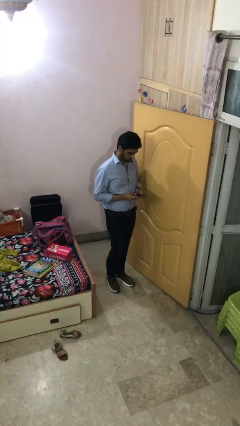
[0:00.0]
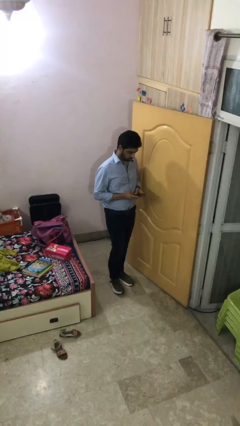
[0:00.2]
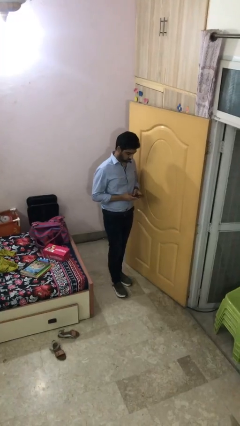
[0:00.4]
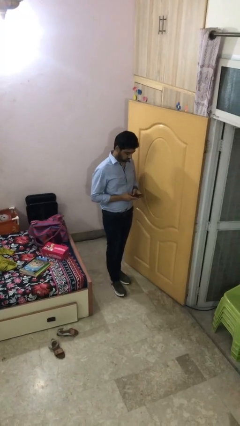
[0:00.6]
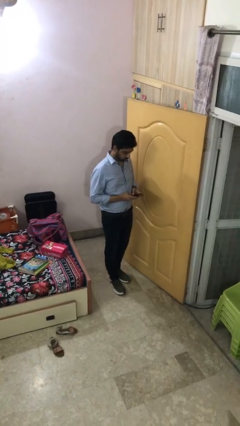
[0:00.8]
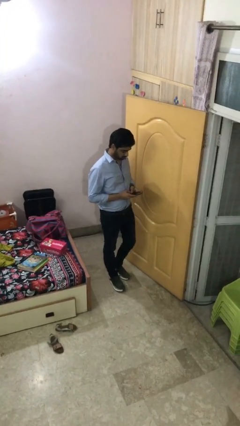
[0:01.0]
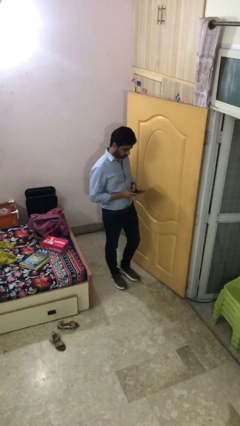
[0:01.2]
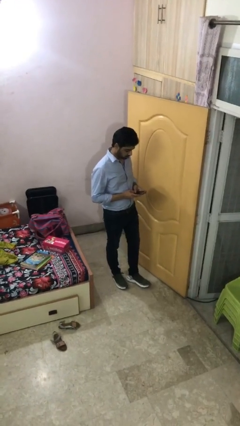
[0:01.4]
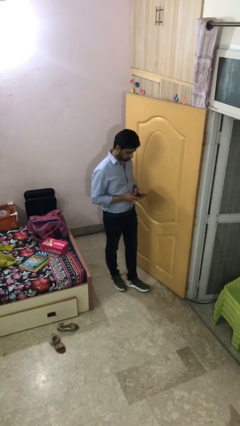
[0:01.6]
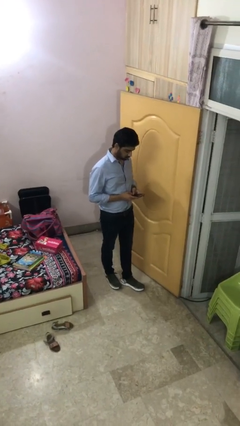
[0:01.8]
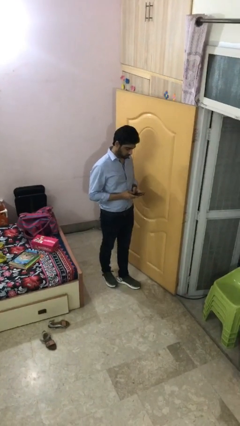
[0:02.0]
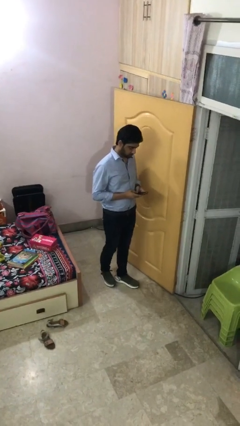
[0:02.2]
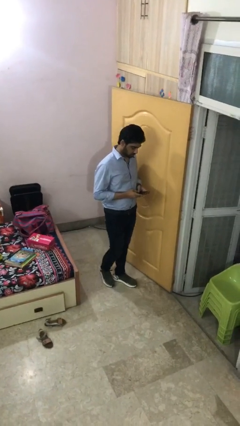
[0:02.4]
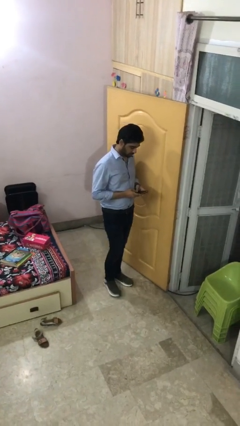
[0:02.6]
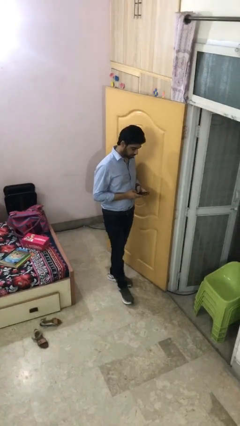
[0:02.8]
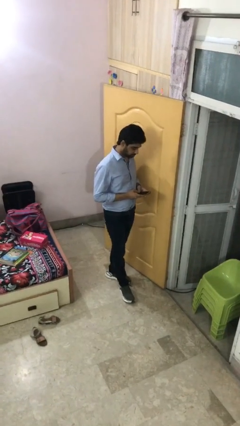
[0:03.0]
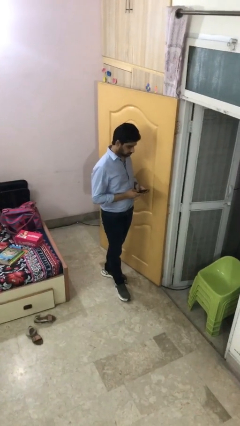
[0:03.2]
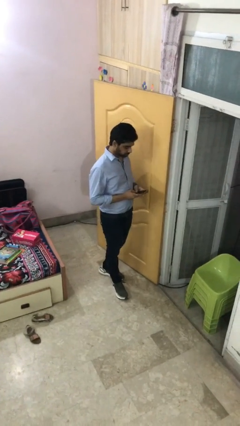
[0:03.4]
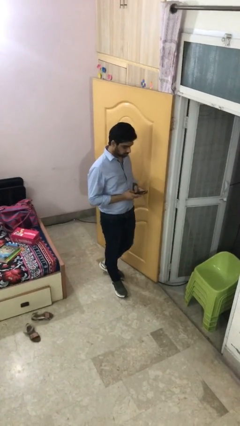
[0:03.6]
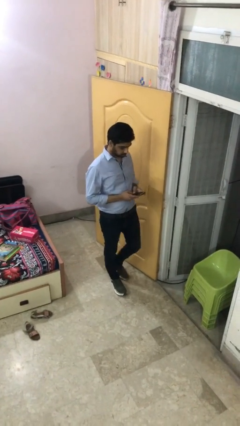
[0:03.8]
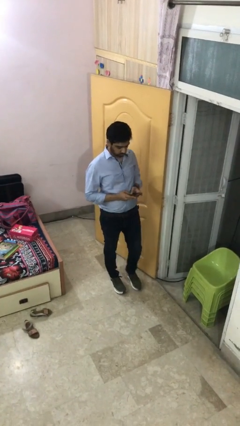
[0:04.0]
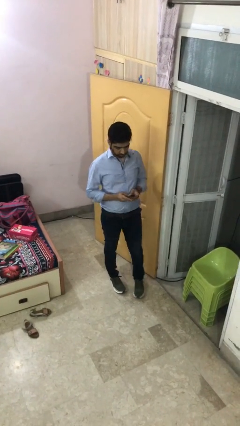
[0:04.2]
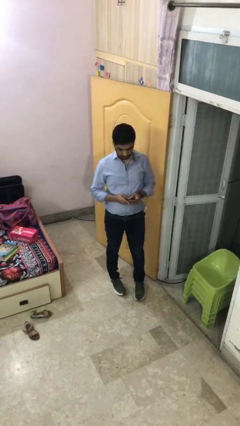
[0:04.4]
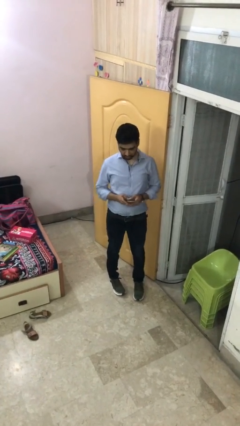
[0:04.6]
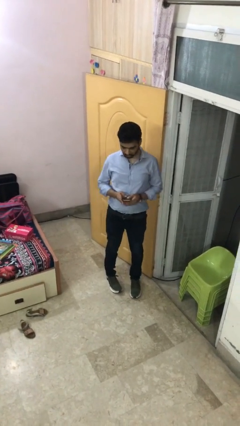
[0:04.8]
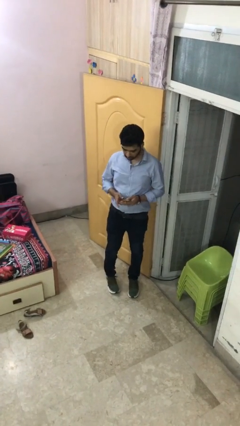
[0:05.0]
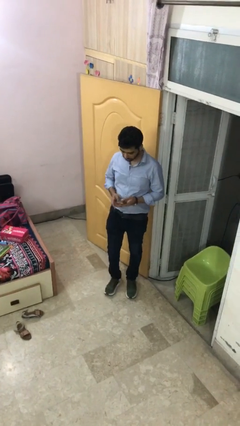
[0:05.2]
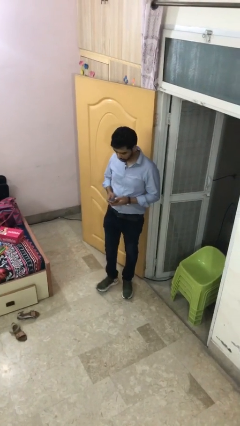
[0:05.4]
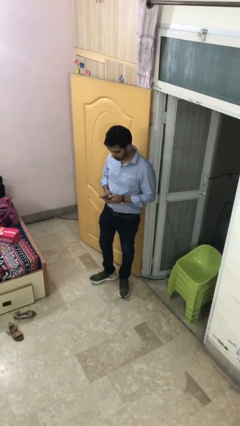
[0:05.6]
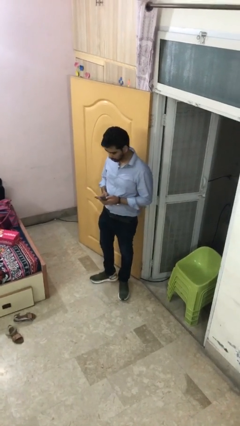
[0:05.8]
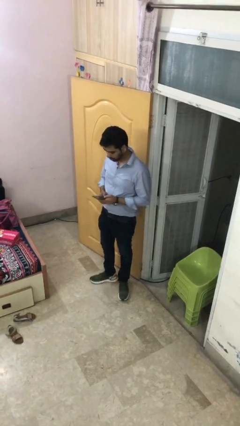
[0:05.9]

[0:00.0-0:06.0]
person texts on phone

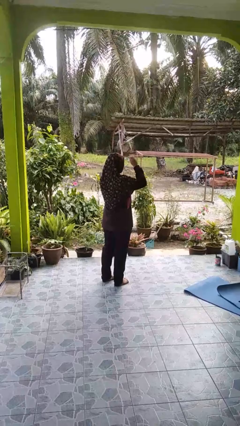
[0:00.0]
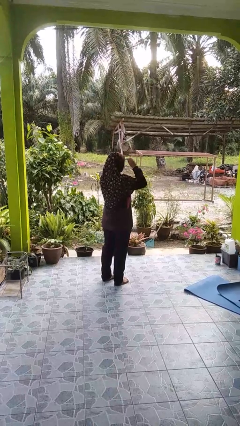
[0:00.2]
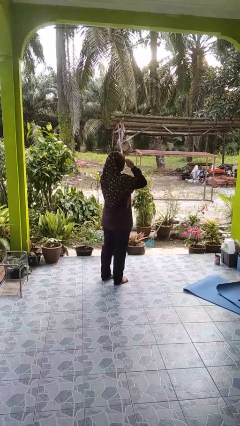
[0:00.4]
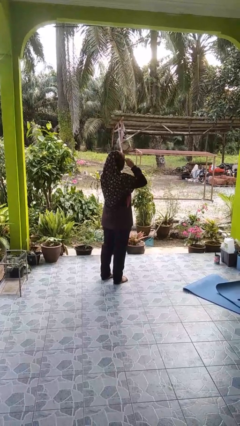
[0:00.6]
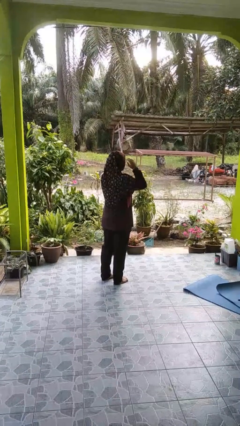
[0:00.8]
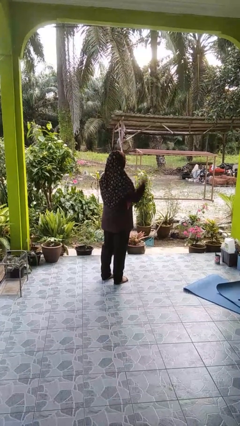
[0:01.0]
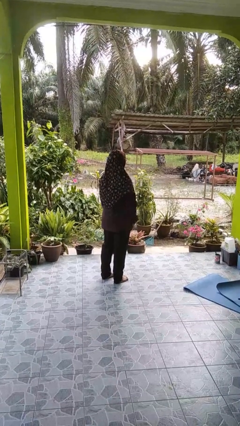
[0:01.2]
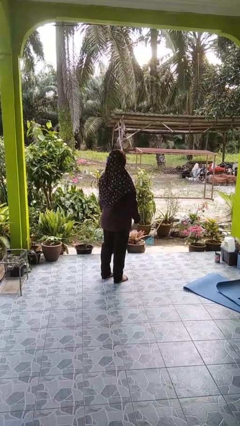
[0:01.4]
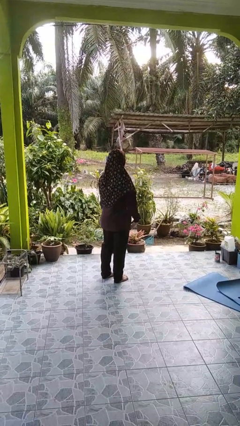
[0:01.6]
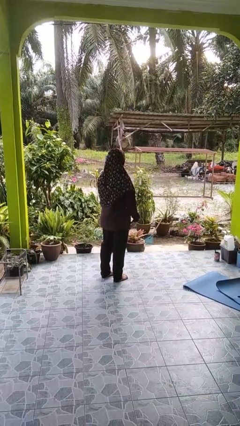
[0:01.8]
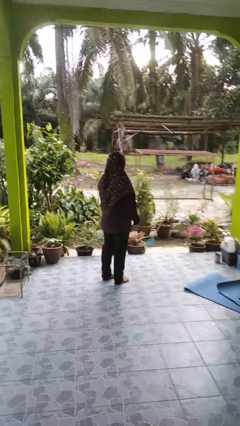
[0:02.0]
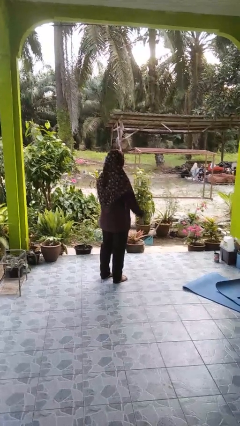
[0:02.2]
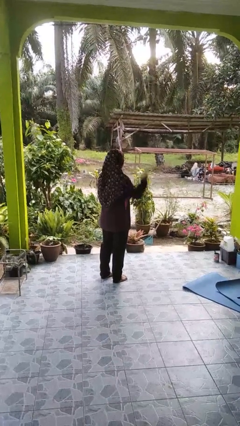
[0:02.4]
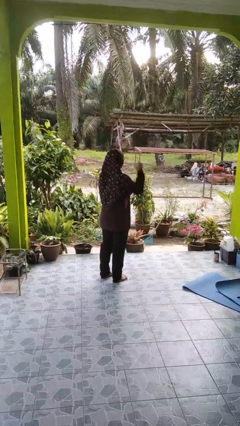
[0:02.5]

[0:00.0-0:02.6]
person puts on glasses

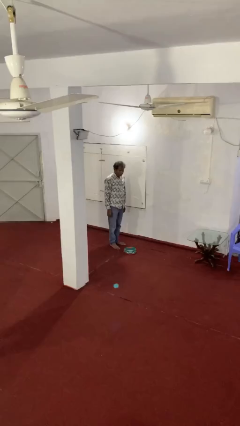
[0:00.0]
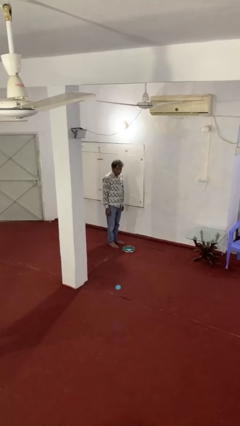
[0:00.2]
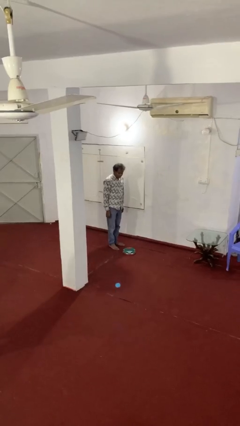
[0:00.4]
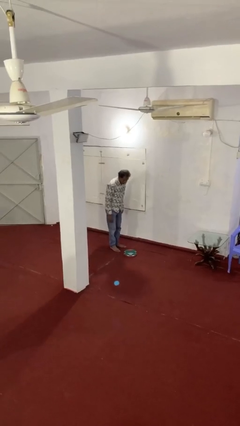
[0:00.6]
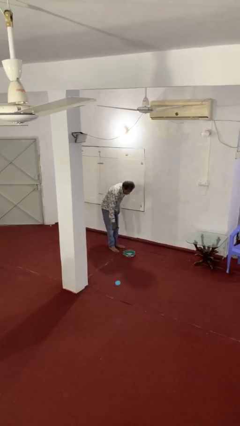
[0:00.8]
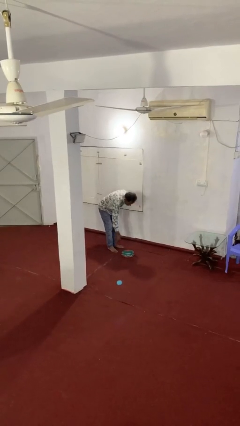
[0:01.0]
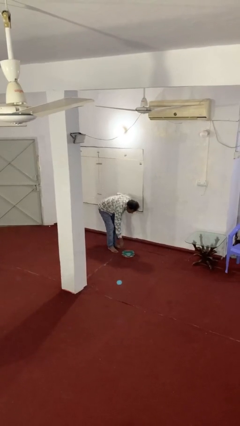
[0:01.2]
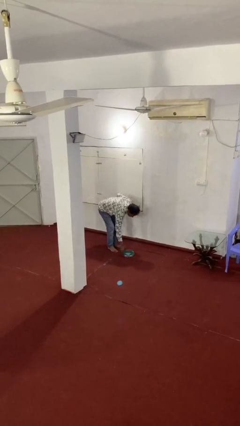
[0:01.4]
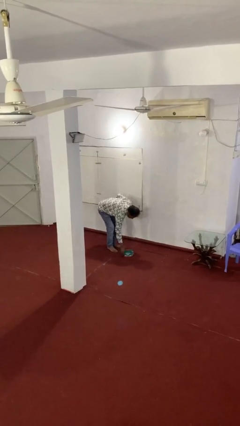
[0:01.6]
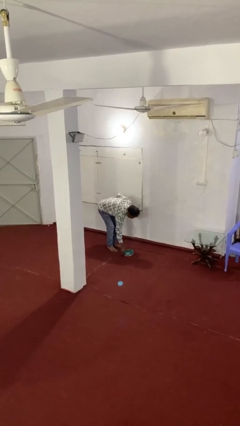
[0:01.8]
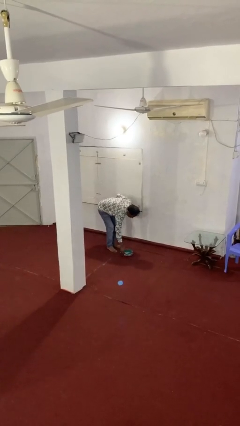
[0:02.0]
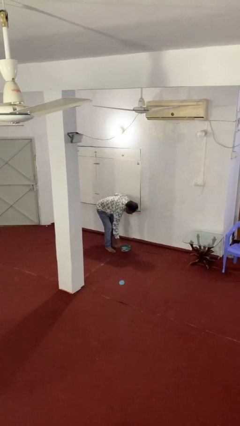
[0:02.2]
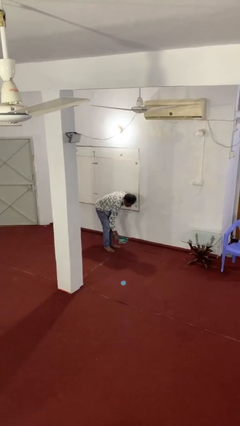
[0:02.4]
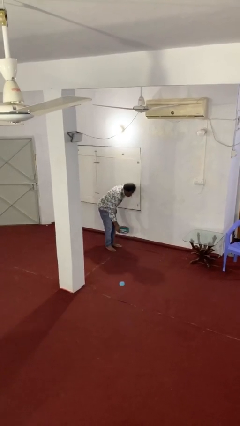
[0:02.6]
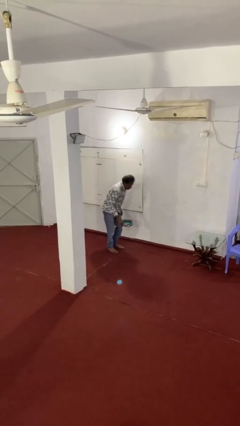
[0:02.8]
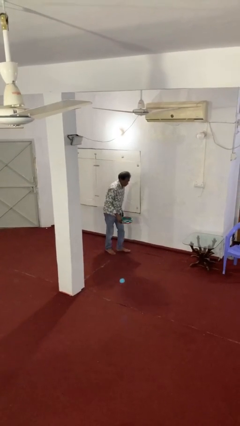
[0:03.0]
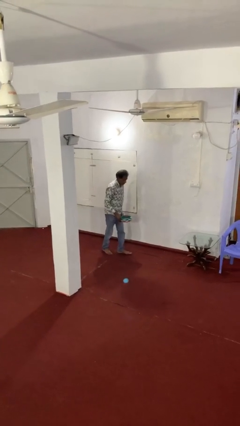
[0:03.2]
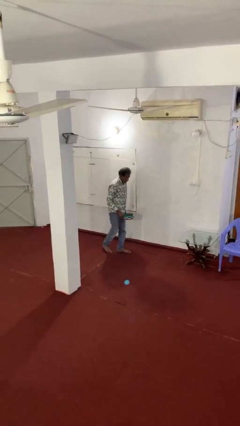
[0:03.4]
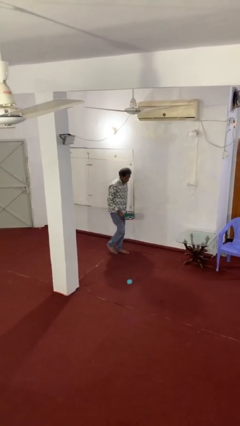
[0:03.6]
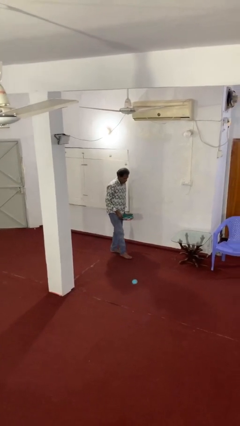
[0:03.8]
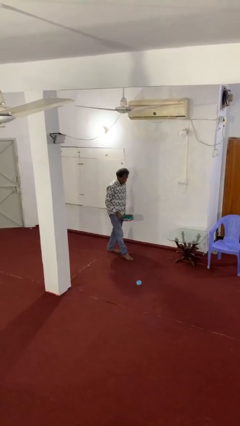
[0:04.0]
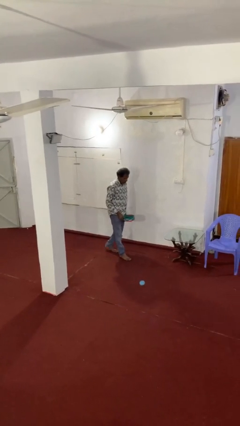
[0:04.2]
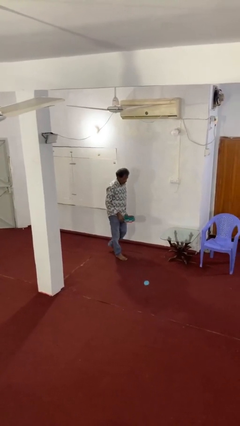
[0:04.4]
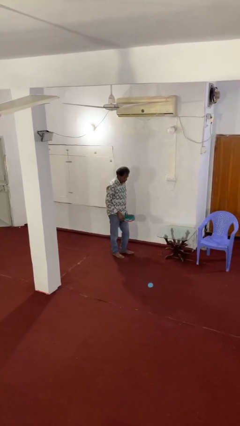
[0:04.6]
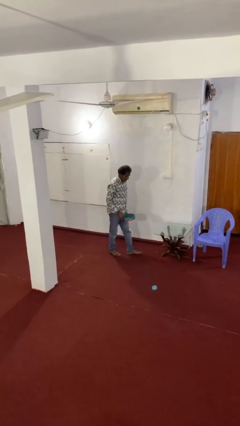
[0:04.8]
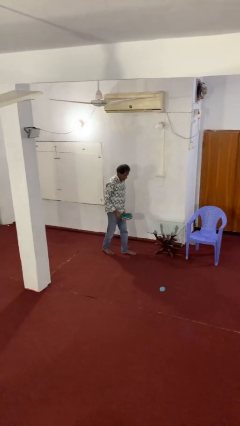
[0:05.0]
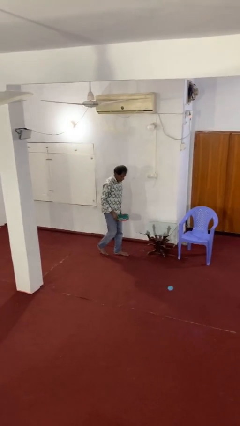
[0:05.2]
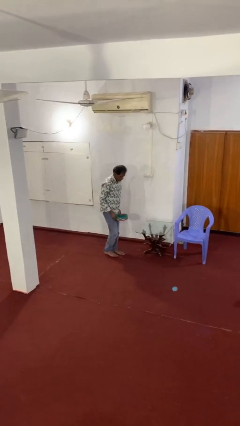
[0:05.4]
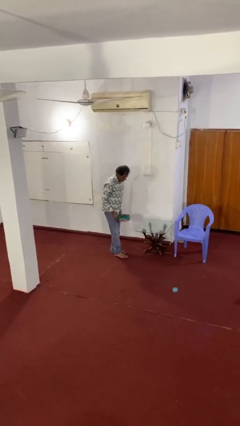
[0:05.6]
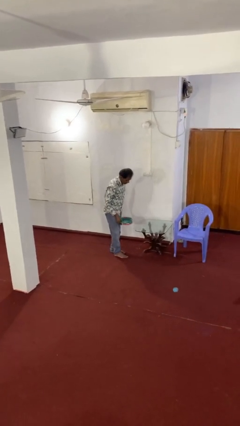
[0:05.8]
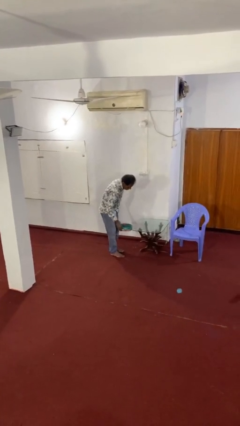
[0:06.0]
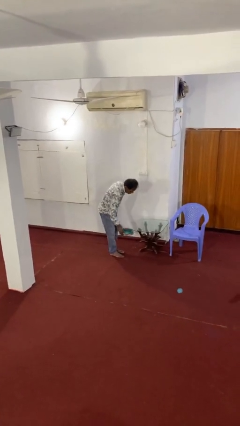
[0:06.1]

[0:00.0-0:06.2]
person picks up object from floor

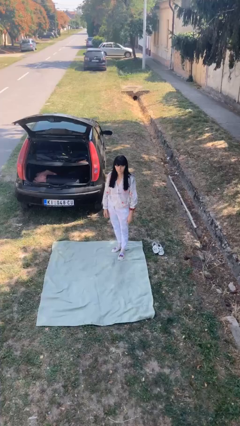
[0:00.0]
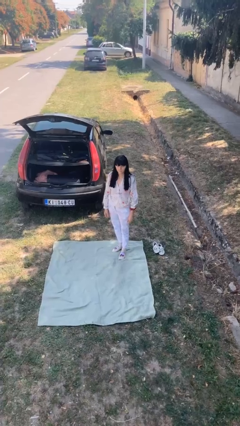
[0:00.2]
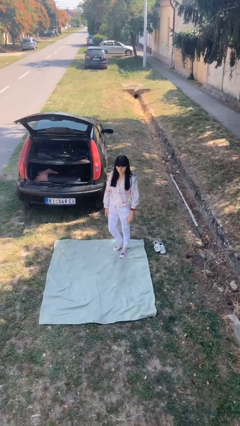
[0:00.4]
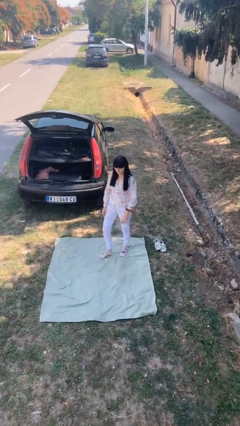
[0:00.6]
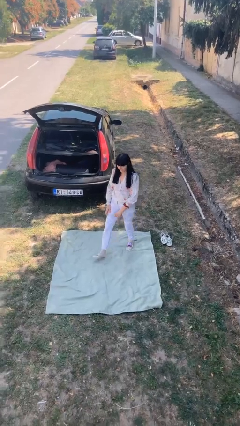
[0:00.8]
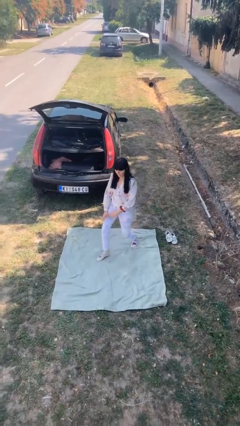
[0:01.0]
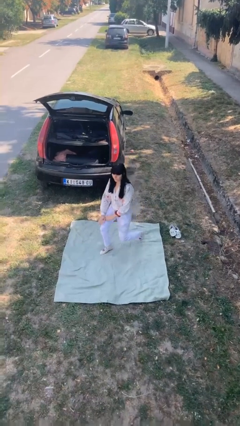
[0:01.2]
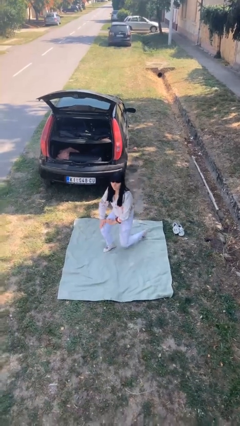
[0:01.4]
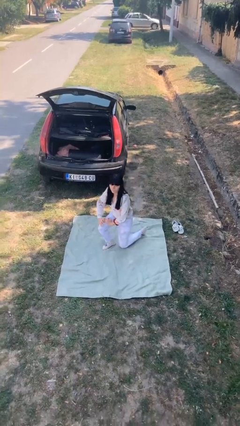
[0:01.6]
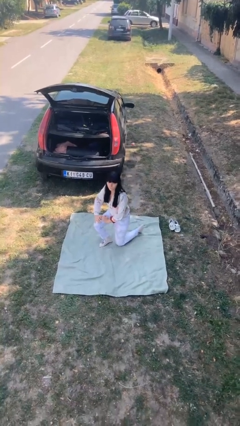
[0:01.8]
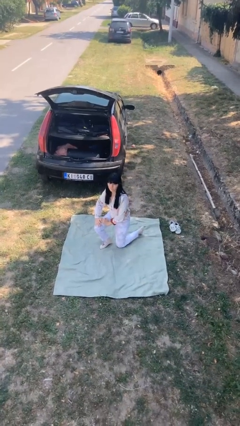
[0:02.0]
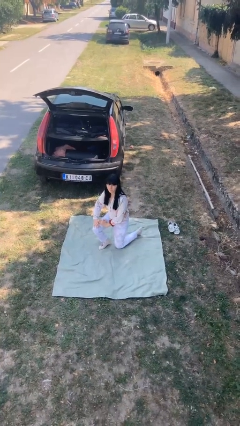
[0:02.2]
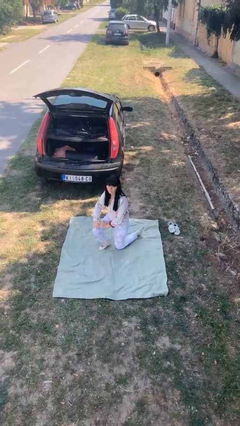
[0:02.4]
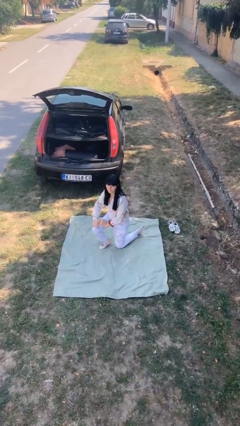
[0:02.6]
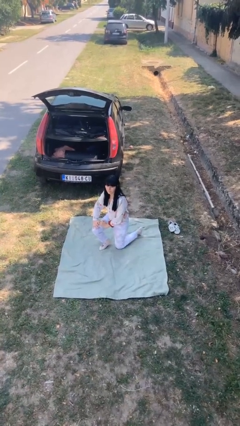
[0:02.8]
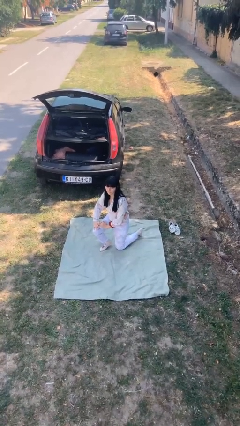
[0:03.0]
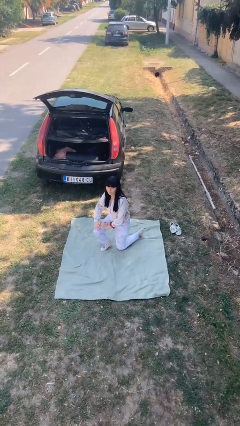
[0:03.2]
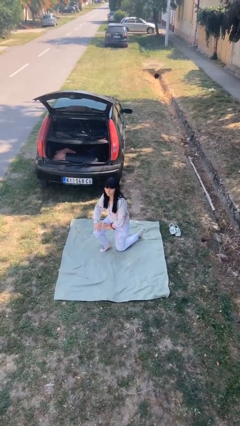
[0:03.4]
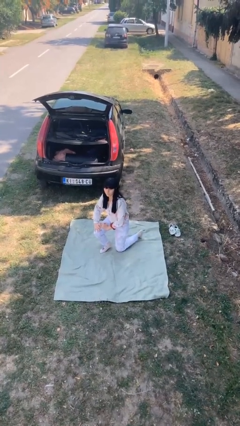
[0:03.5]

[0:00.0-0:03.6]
person kneels
